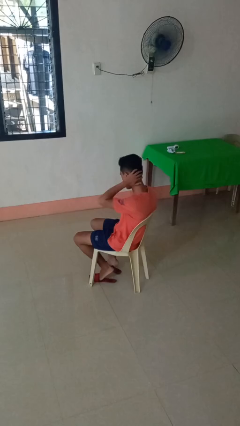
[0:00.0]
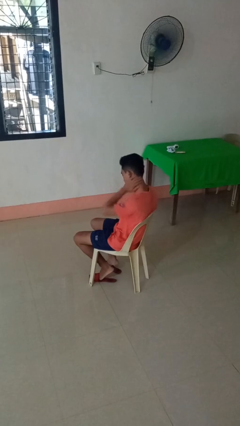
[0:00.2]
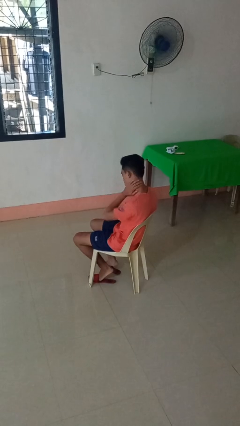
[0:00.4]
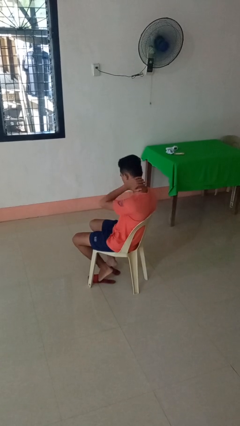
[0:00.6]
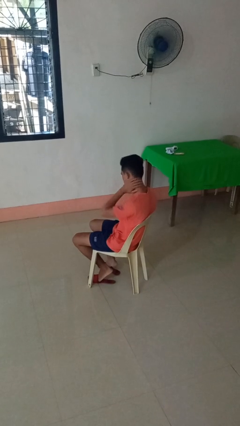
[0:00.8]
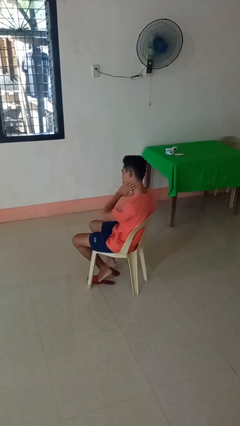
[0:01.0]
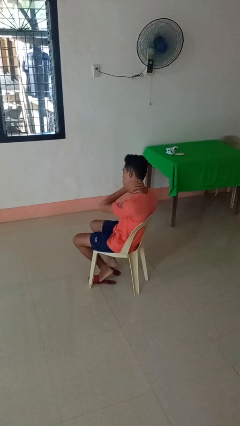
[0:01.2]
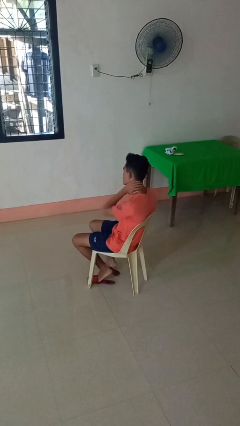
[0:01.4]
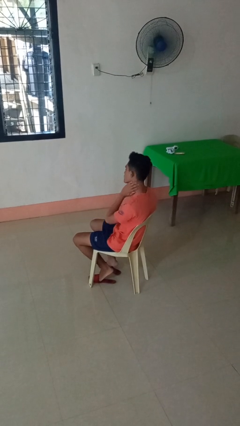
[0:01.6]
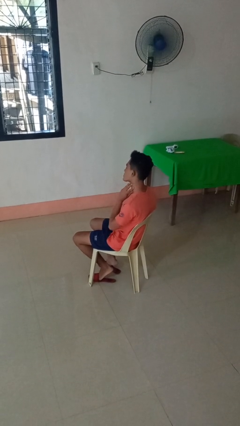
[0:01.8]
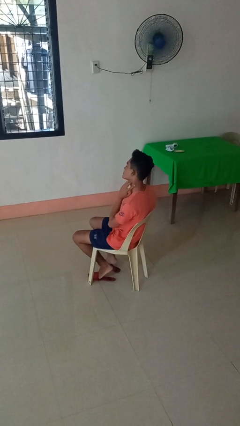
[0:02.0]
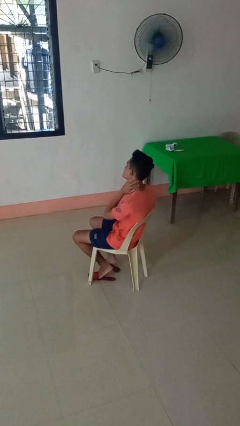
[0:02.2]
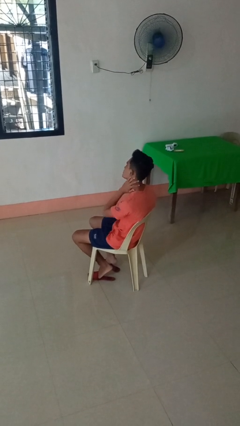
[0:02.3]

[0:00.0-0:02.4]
person rubs neck

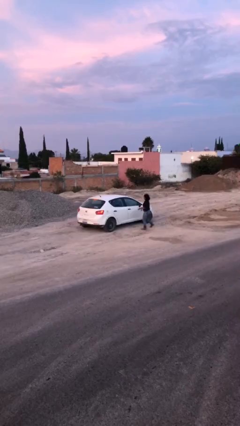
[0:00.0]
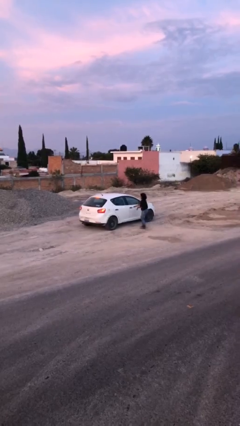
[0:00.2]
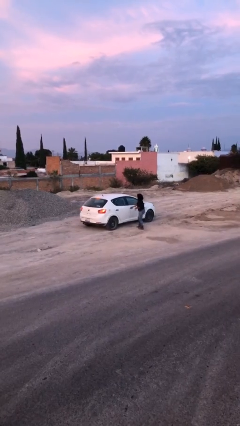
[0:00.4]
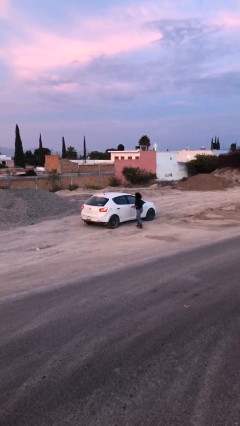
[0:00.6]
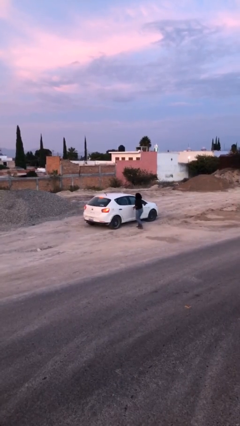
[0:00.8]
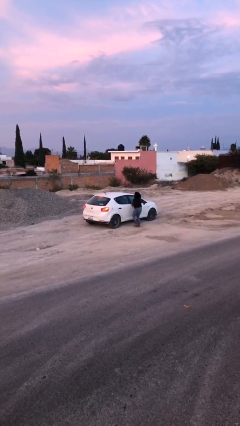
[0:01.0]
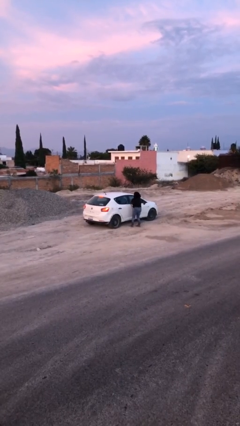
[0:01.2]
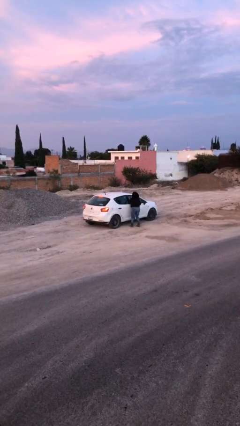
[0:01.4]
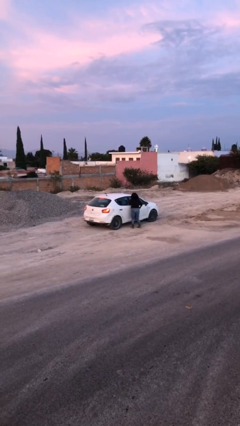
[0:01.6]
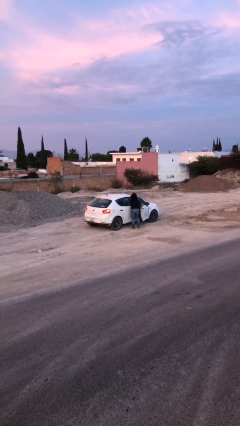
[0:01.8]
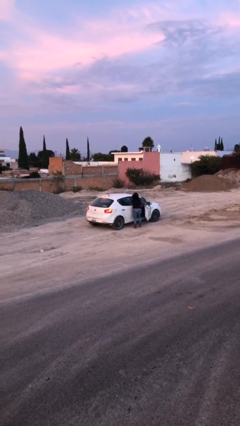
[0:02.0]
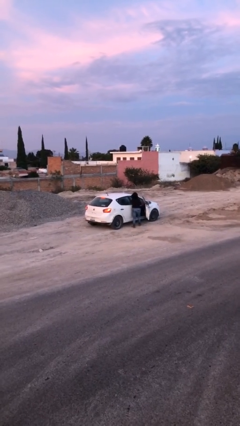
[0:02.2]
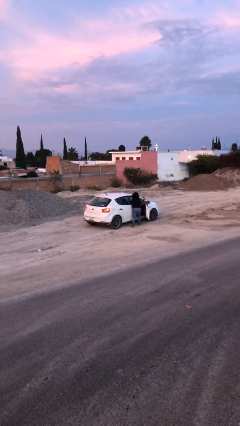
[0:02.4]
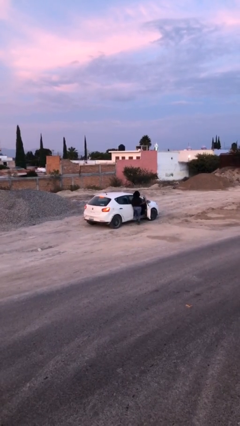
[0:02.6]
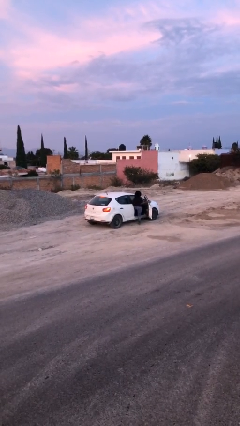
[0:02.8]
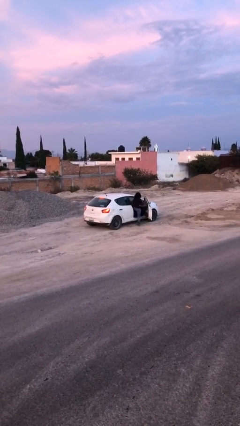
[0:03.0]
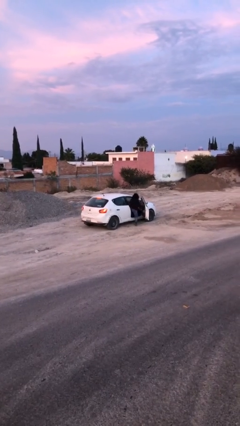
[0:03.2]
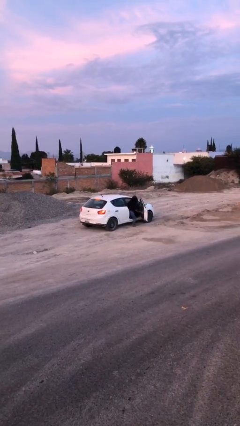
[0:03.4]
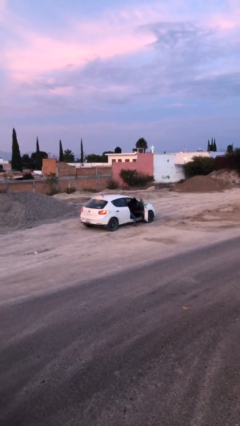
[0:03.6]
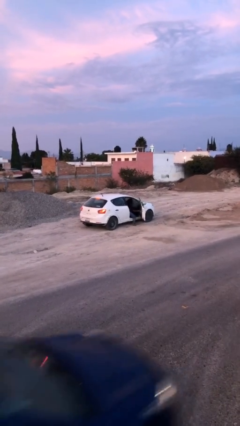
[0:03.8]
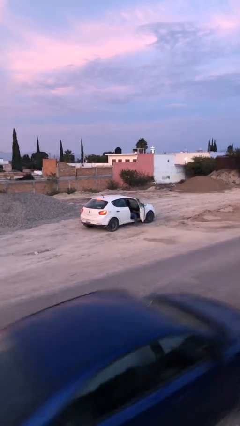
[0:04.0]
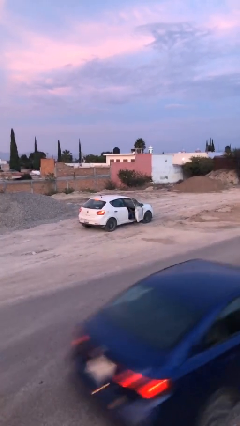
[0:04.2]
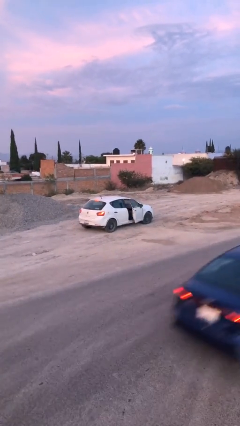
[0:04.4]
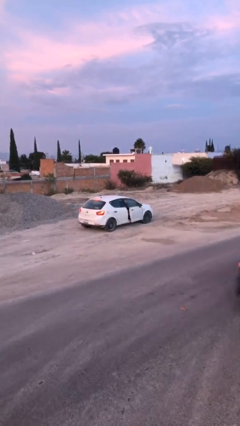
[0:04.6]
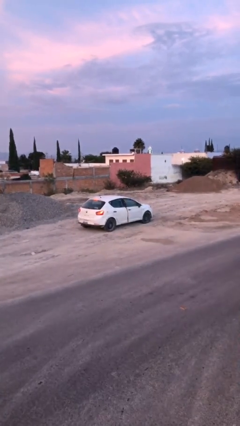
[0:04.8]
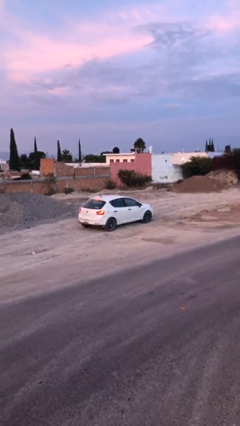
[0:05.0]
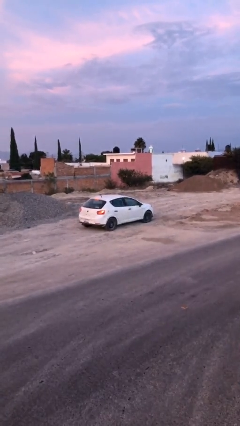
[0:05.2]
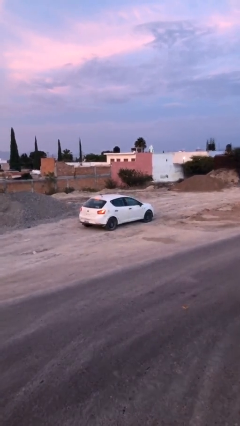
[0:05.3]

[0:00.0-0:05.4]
car picks up person

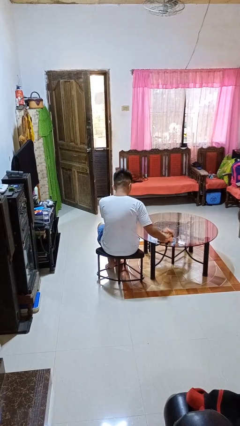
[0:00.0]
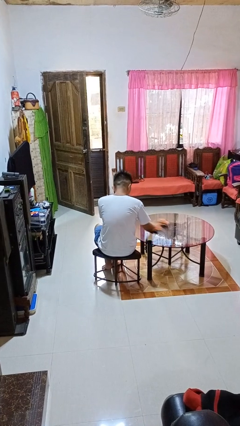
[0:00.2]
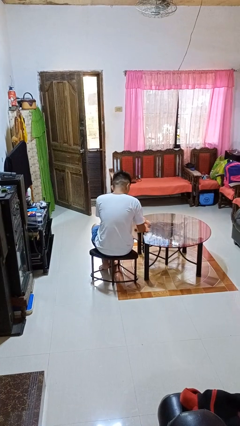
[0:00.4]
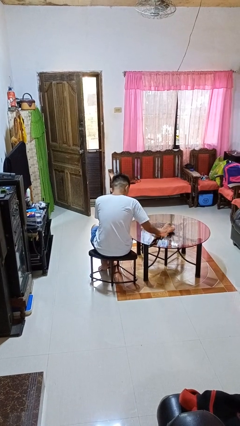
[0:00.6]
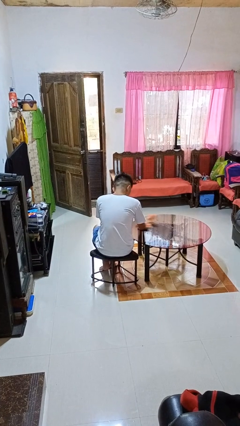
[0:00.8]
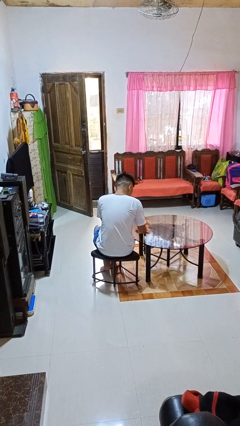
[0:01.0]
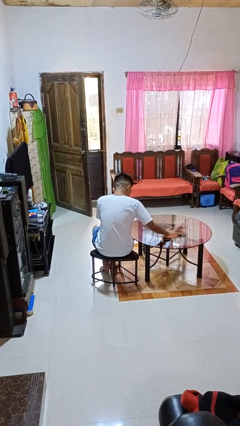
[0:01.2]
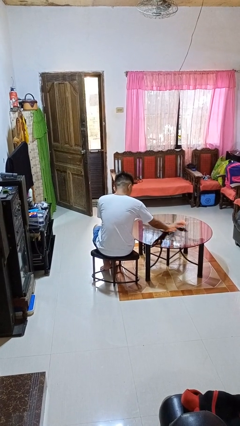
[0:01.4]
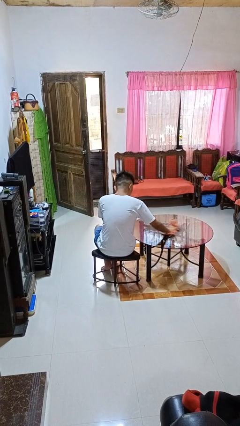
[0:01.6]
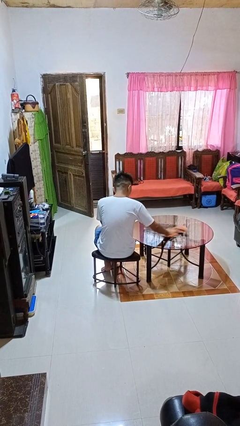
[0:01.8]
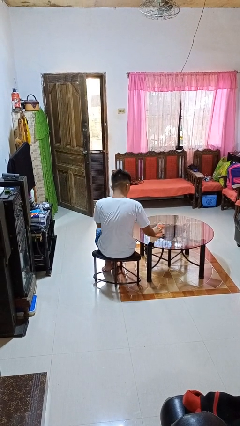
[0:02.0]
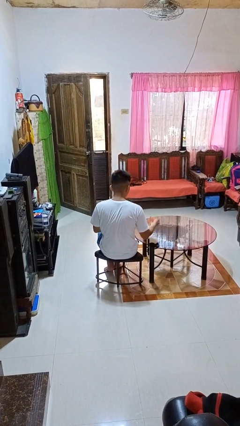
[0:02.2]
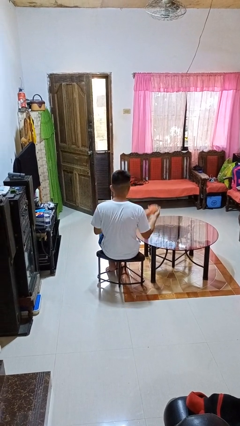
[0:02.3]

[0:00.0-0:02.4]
person cleans table with rag

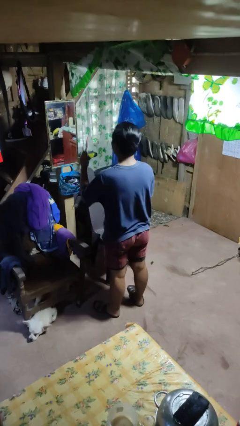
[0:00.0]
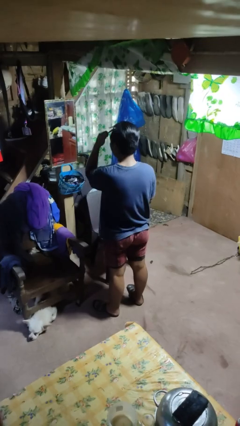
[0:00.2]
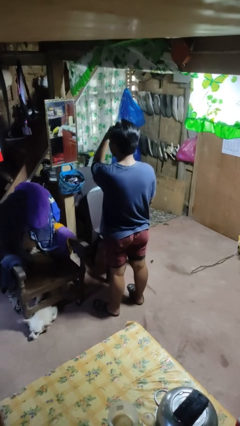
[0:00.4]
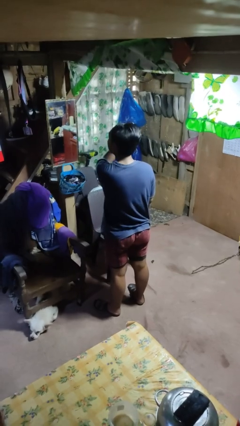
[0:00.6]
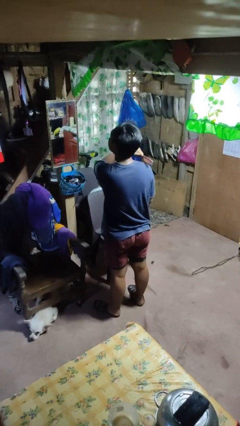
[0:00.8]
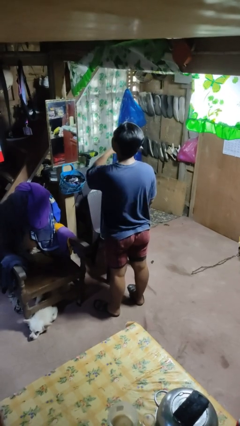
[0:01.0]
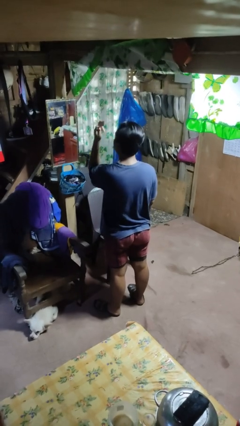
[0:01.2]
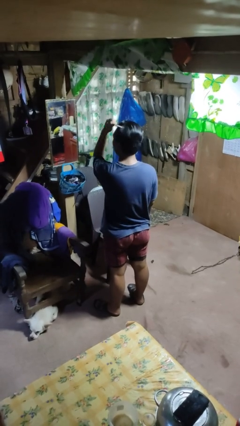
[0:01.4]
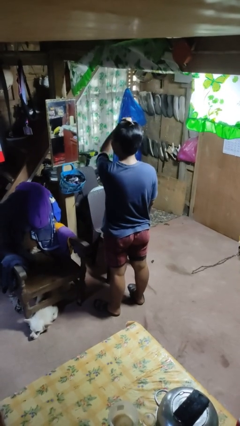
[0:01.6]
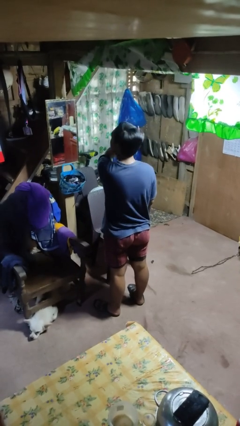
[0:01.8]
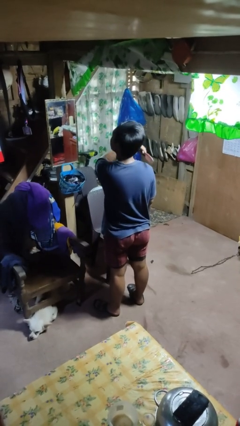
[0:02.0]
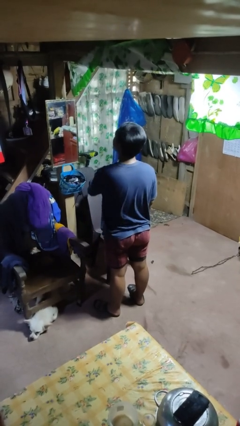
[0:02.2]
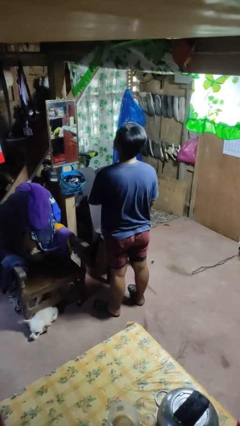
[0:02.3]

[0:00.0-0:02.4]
person brushes hair

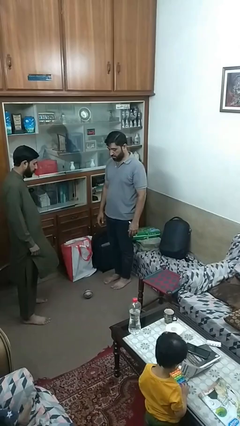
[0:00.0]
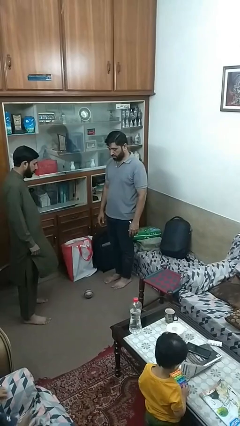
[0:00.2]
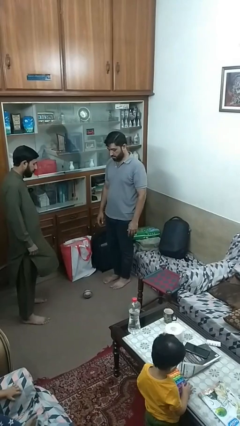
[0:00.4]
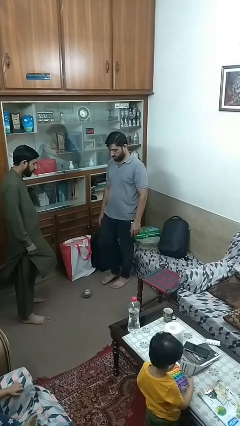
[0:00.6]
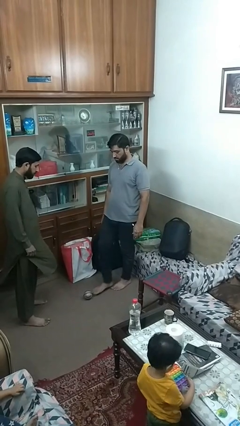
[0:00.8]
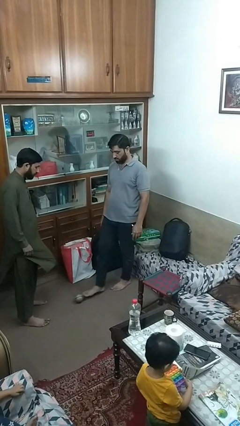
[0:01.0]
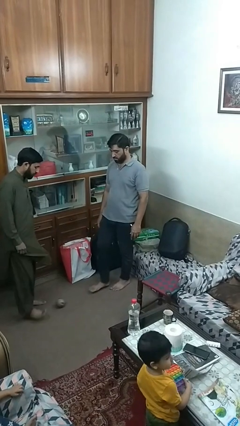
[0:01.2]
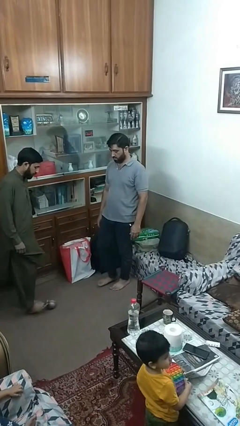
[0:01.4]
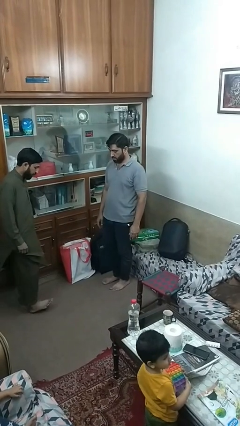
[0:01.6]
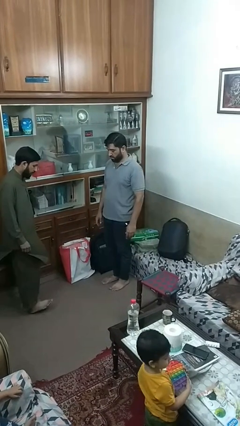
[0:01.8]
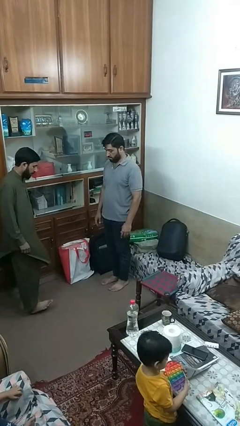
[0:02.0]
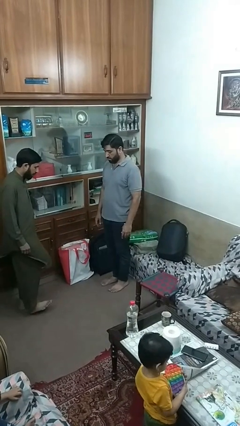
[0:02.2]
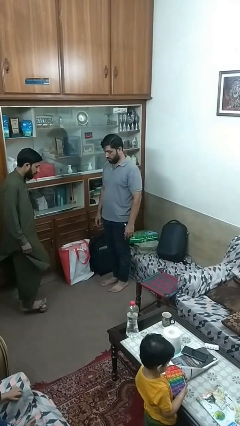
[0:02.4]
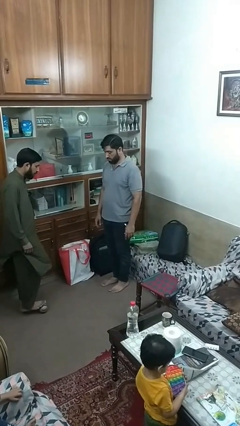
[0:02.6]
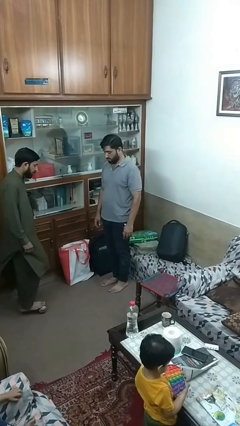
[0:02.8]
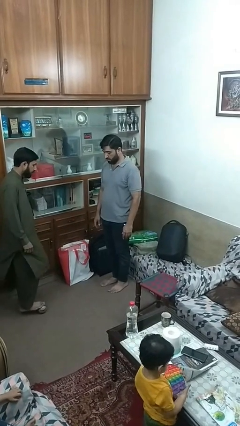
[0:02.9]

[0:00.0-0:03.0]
person kicks object to person

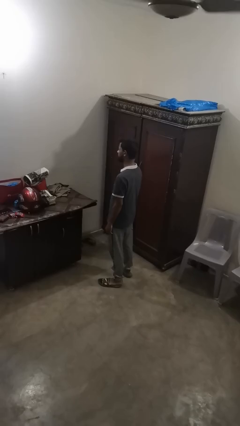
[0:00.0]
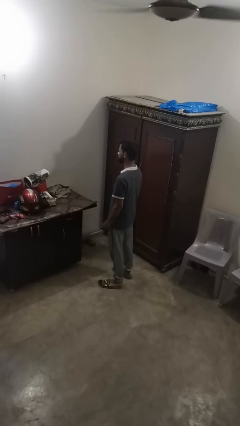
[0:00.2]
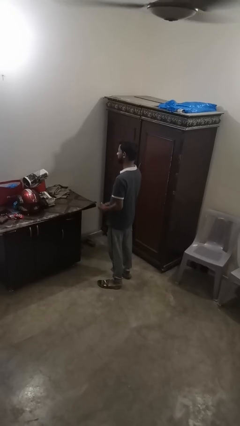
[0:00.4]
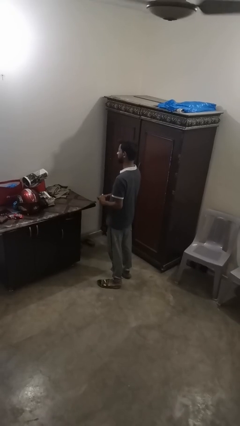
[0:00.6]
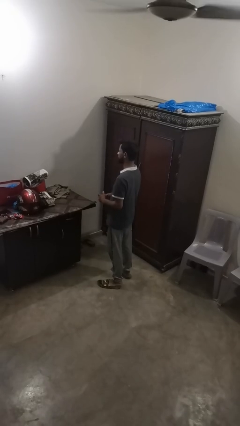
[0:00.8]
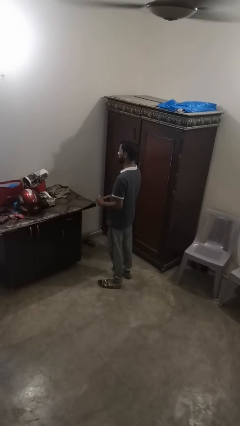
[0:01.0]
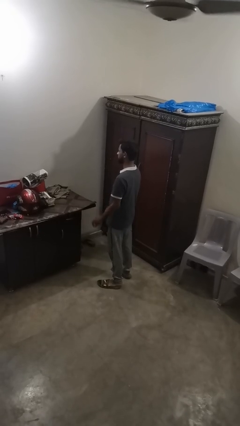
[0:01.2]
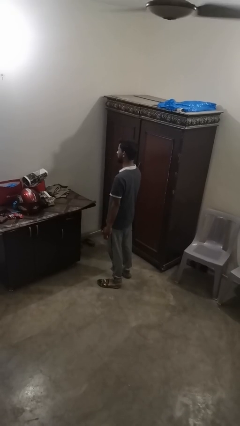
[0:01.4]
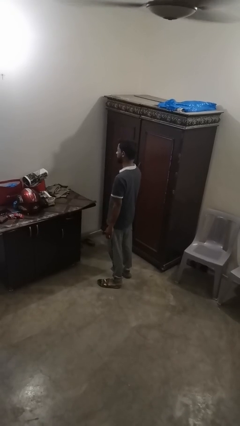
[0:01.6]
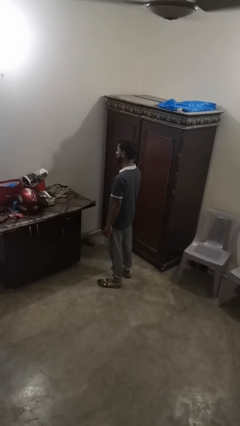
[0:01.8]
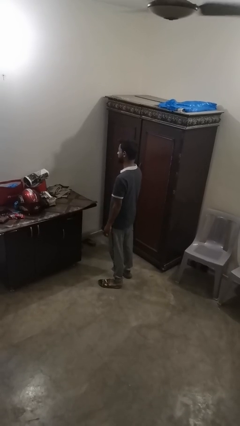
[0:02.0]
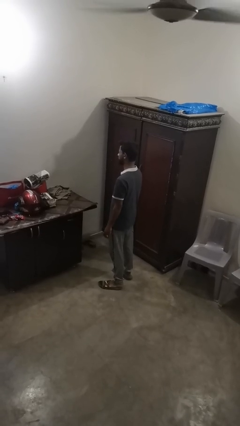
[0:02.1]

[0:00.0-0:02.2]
person puts on ring
